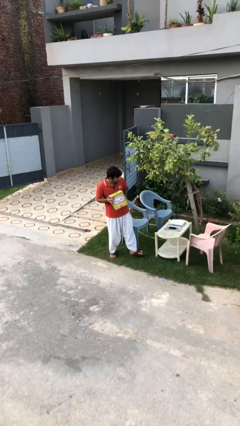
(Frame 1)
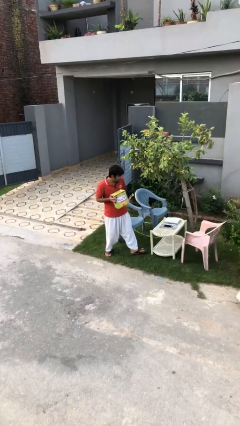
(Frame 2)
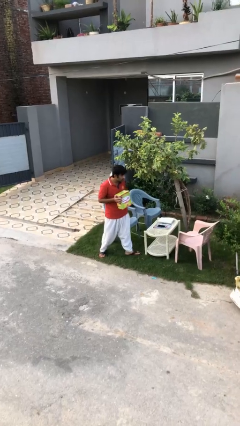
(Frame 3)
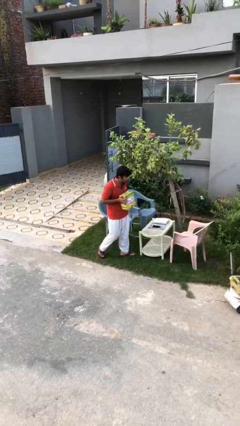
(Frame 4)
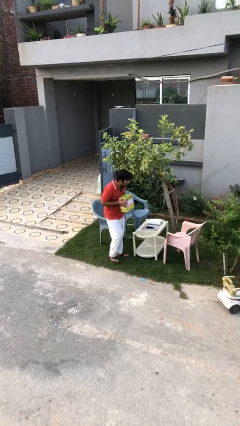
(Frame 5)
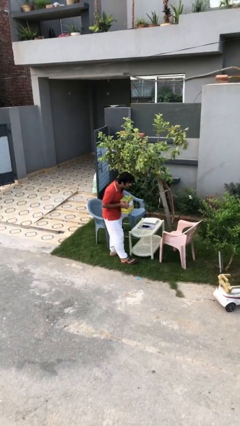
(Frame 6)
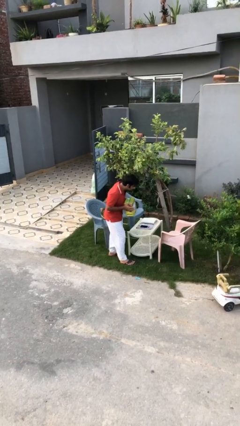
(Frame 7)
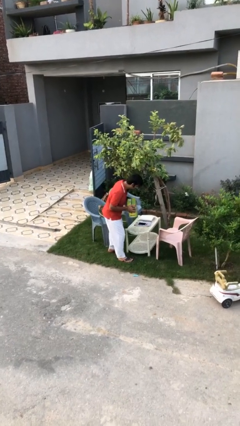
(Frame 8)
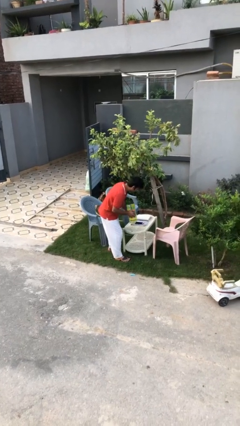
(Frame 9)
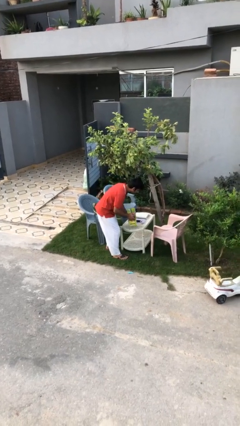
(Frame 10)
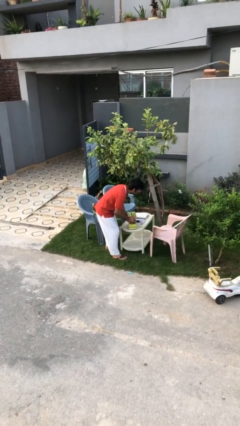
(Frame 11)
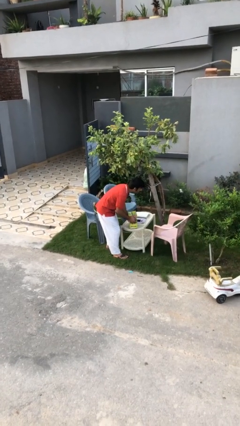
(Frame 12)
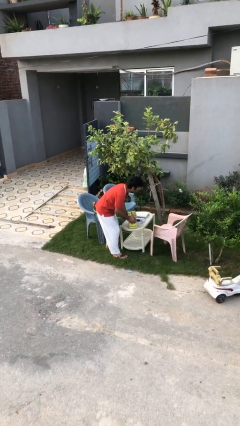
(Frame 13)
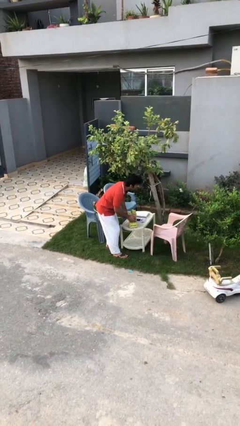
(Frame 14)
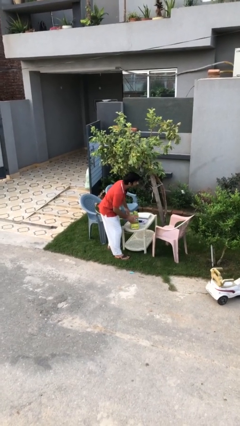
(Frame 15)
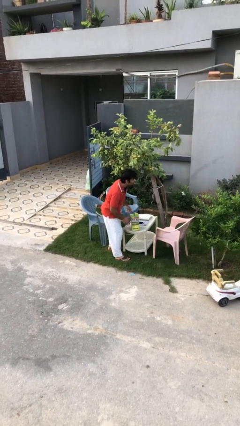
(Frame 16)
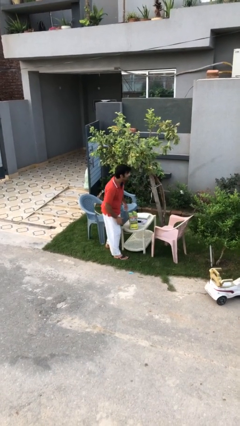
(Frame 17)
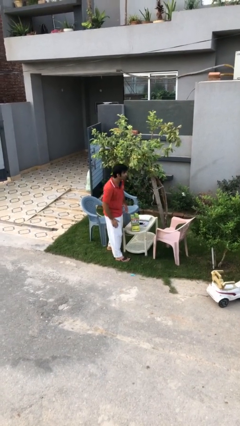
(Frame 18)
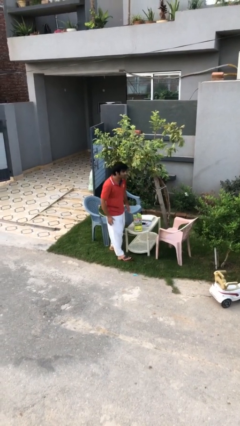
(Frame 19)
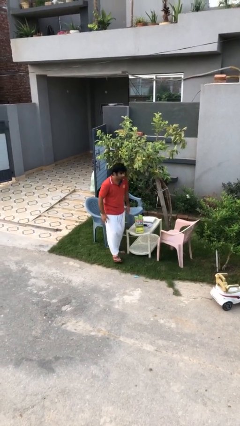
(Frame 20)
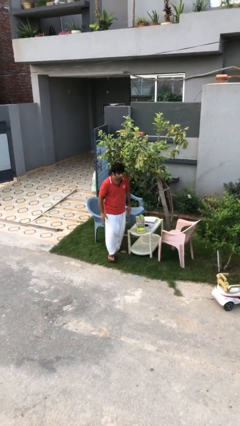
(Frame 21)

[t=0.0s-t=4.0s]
person puts down object on floor

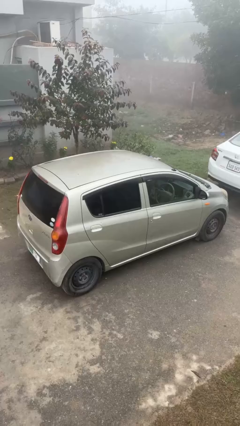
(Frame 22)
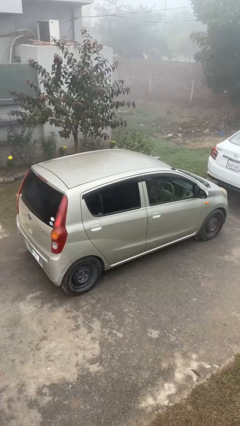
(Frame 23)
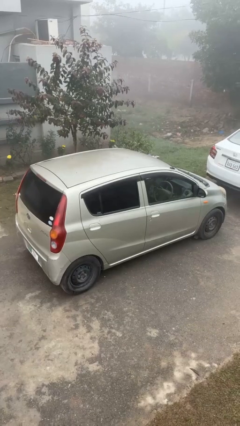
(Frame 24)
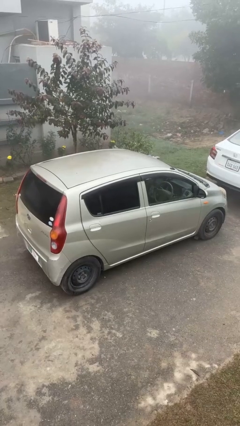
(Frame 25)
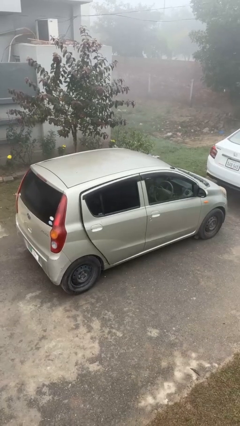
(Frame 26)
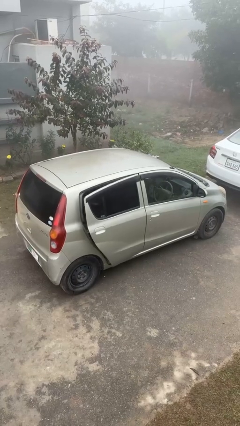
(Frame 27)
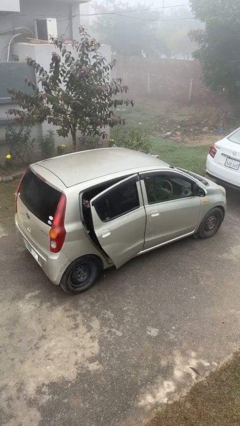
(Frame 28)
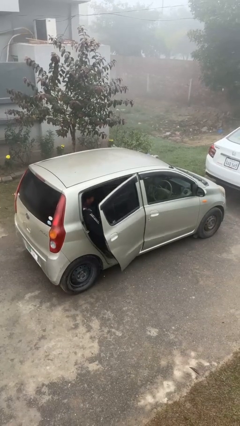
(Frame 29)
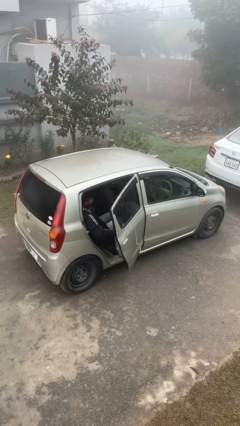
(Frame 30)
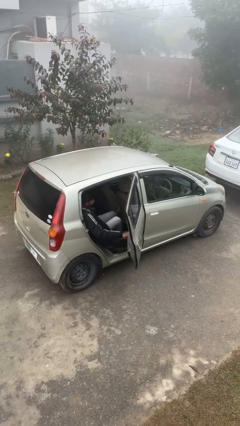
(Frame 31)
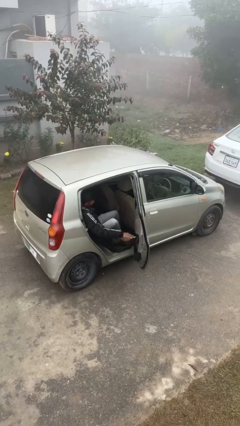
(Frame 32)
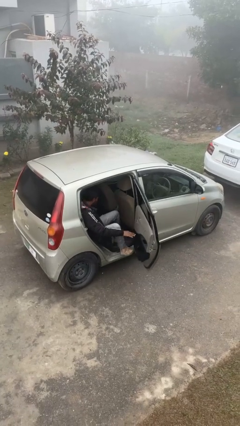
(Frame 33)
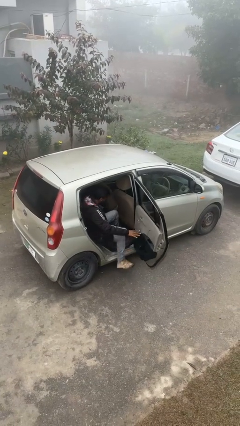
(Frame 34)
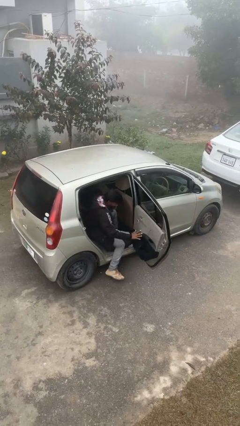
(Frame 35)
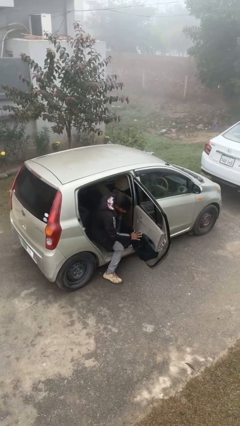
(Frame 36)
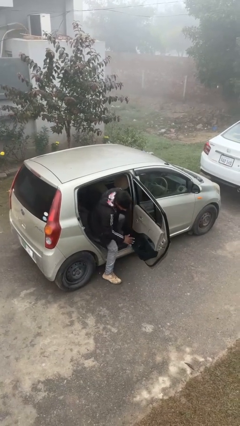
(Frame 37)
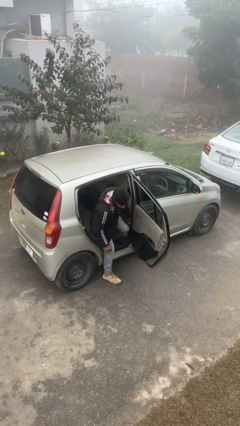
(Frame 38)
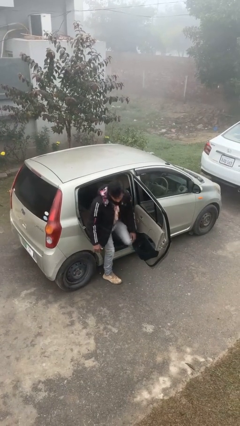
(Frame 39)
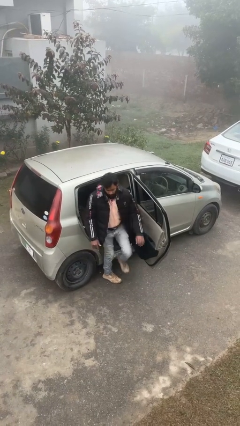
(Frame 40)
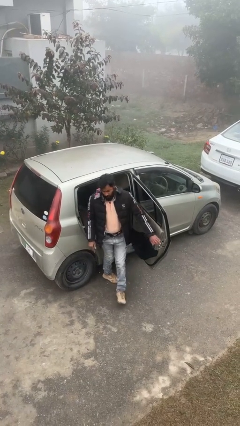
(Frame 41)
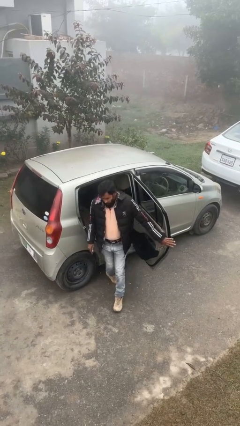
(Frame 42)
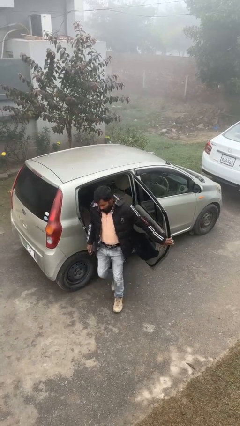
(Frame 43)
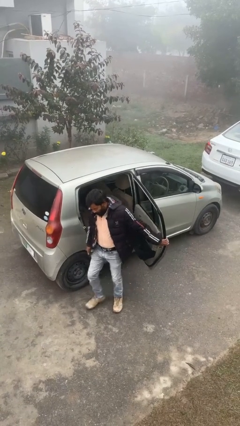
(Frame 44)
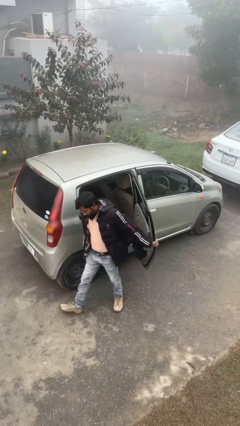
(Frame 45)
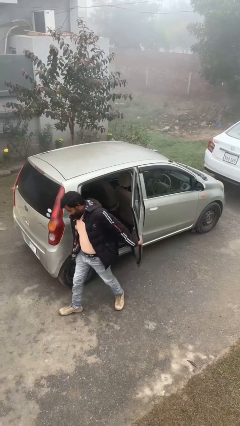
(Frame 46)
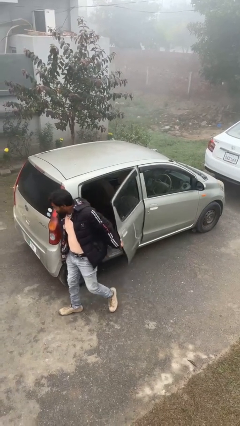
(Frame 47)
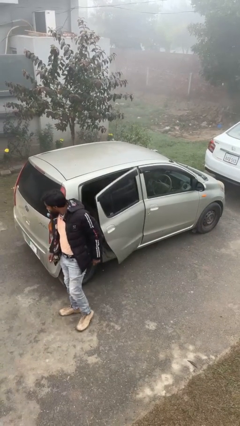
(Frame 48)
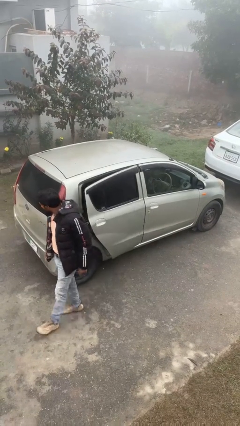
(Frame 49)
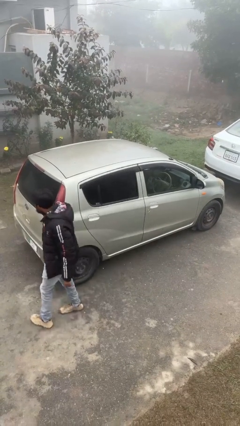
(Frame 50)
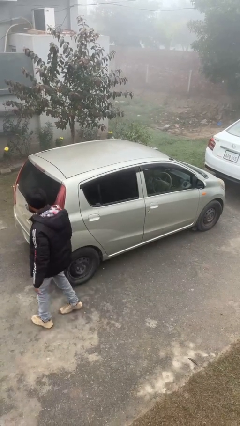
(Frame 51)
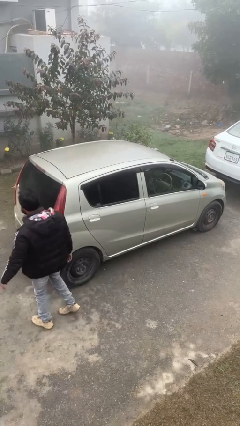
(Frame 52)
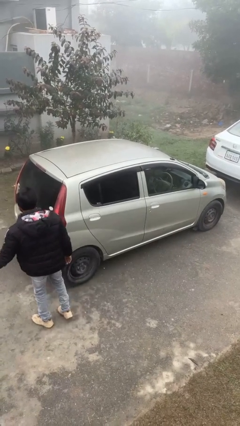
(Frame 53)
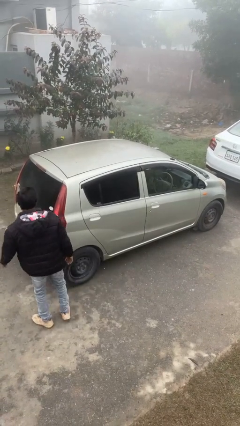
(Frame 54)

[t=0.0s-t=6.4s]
car drops off person

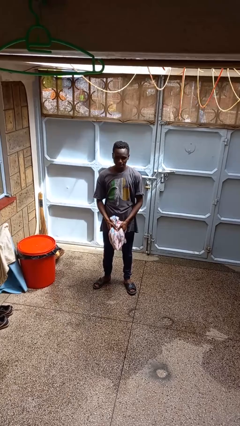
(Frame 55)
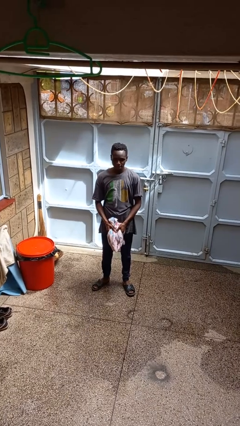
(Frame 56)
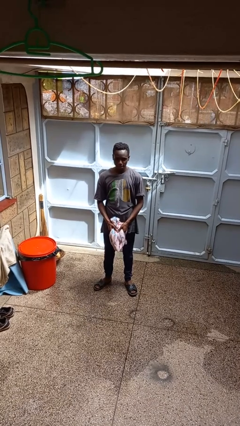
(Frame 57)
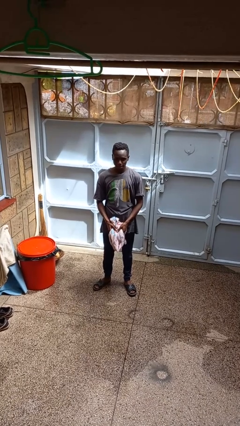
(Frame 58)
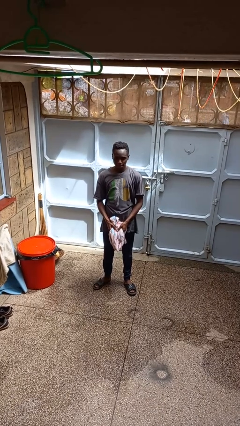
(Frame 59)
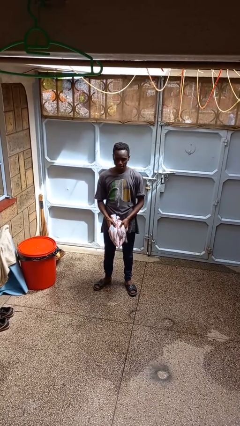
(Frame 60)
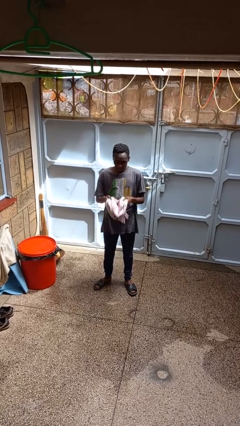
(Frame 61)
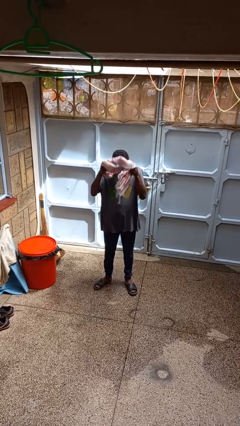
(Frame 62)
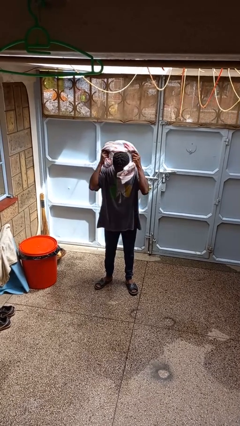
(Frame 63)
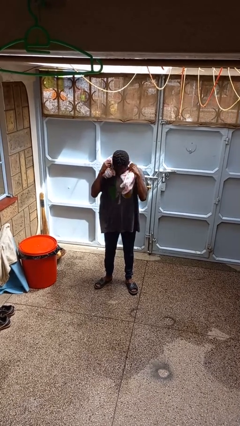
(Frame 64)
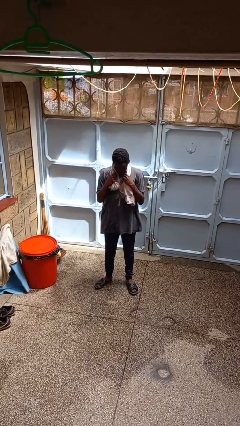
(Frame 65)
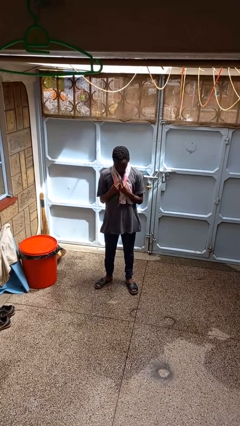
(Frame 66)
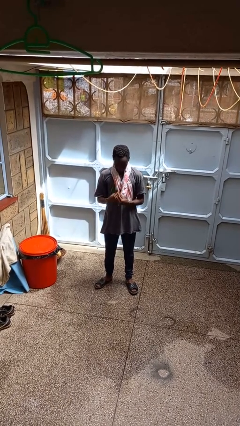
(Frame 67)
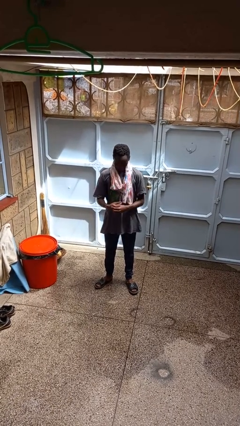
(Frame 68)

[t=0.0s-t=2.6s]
person puts on scarf

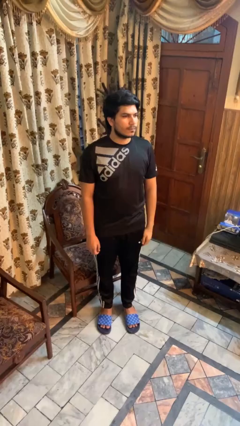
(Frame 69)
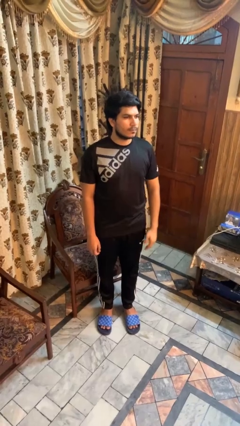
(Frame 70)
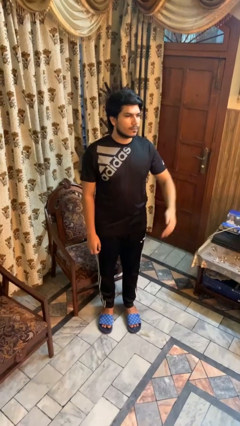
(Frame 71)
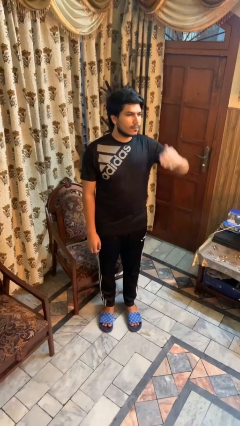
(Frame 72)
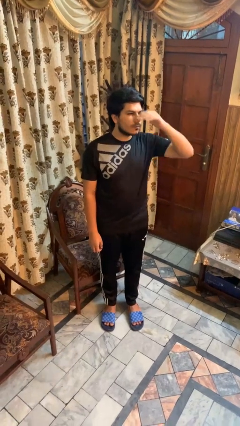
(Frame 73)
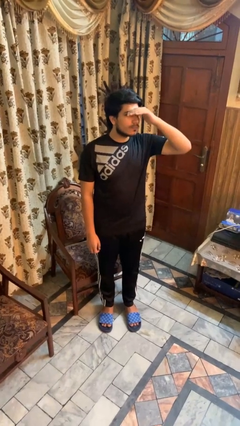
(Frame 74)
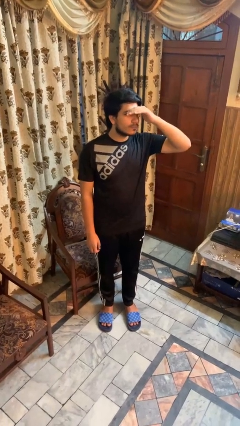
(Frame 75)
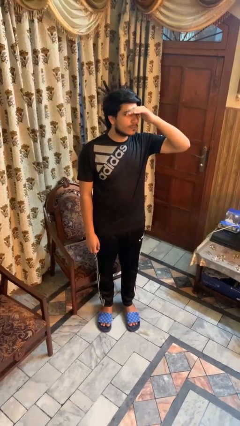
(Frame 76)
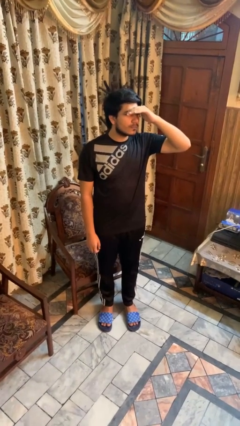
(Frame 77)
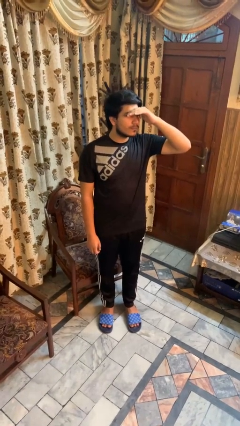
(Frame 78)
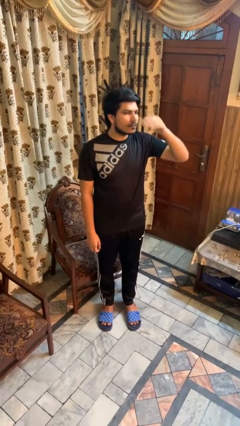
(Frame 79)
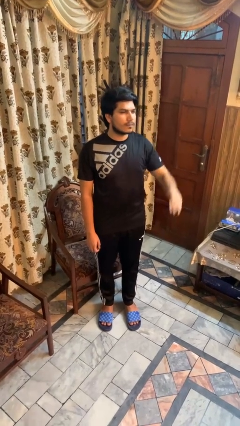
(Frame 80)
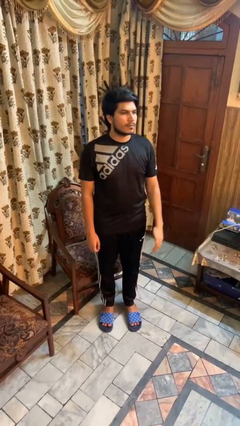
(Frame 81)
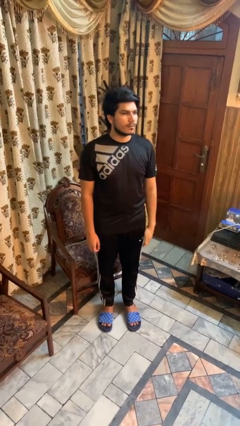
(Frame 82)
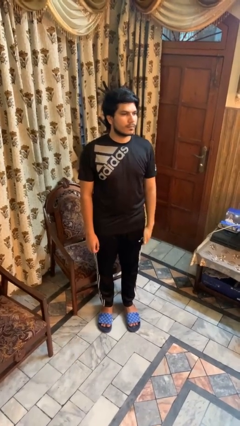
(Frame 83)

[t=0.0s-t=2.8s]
person shades eyes

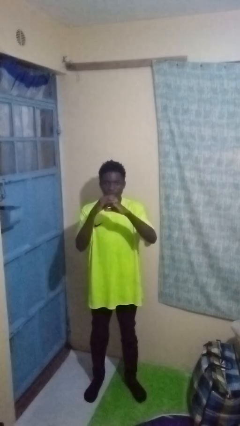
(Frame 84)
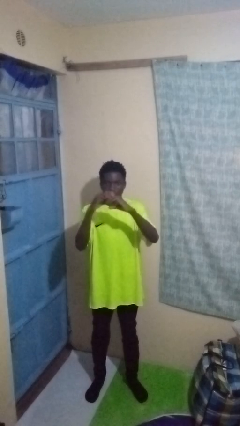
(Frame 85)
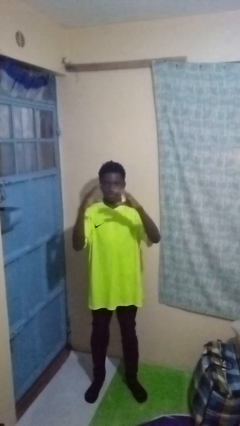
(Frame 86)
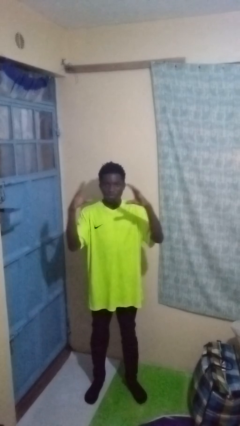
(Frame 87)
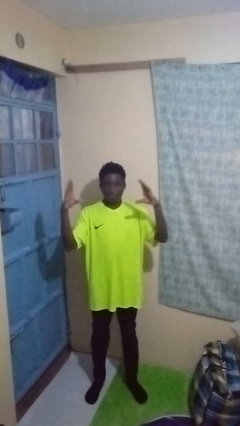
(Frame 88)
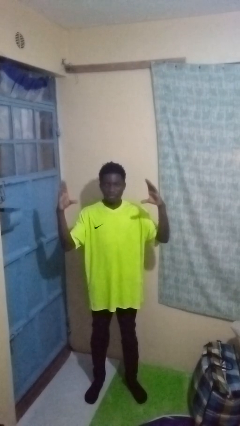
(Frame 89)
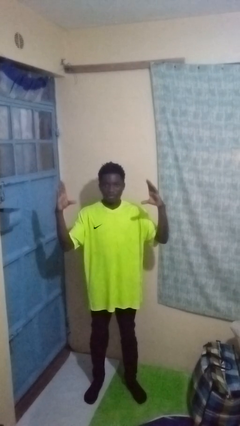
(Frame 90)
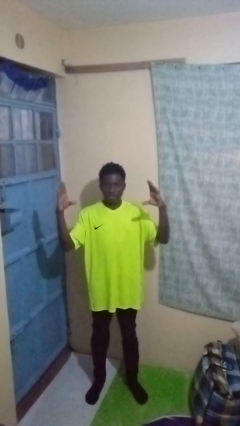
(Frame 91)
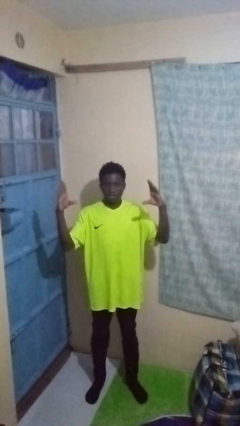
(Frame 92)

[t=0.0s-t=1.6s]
person gestures zoom in

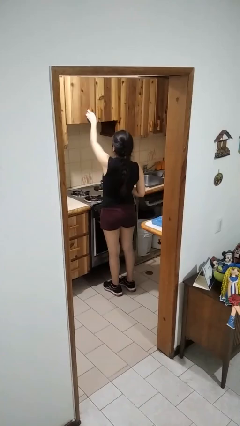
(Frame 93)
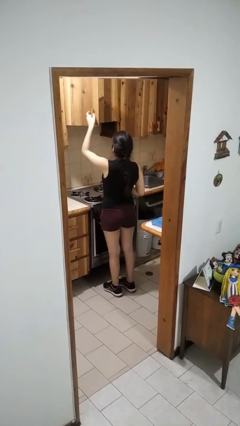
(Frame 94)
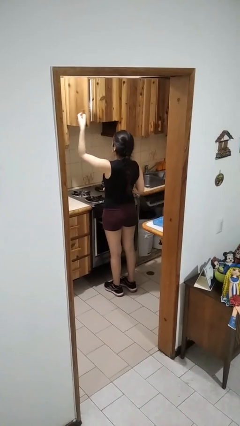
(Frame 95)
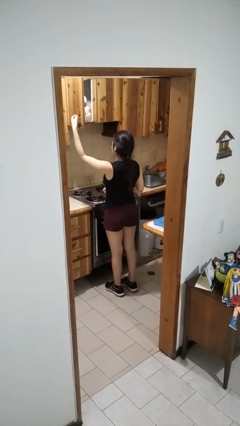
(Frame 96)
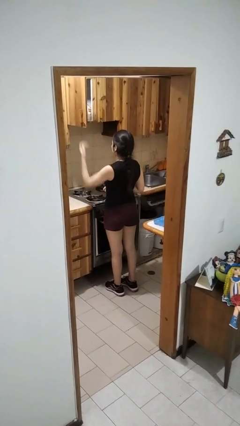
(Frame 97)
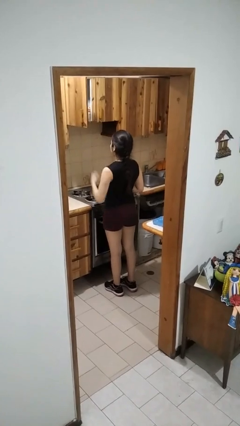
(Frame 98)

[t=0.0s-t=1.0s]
person opens cabinet
